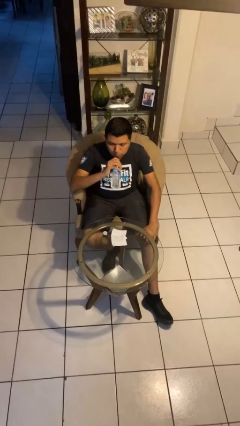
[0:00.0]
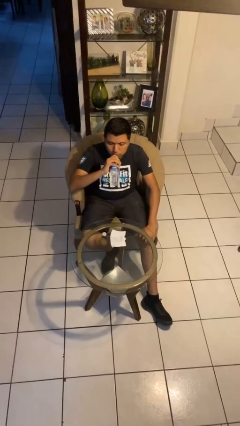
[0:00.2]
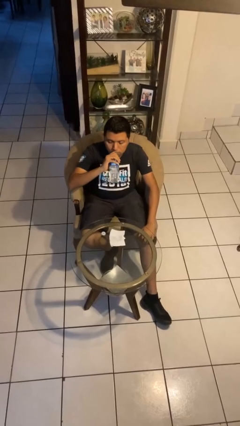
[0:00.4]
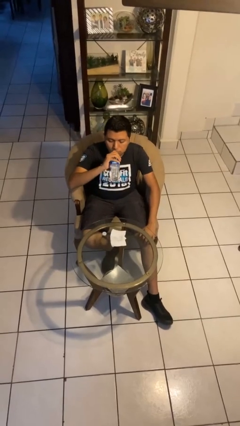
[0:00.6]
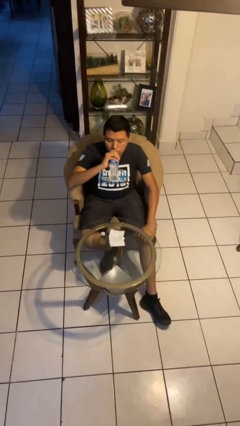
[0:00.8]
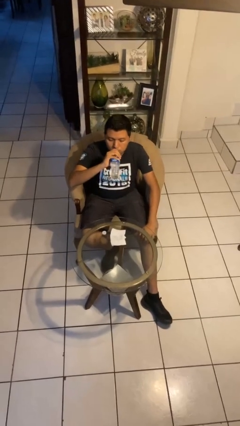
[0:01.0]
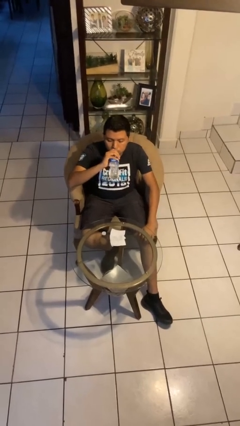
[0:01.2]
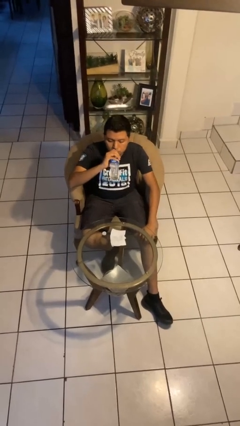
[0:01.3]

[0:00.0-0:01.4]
person drinks from bottle

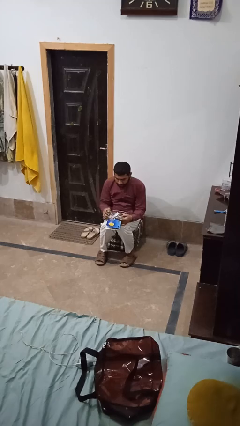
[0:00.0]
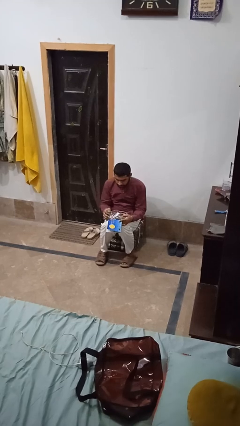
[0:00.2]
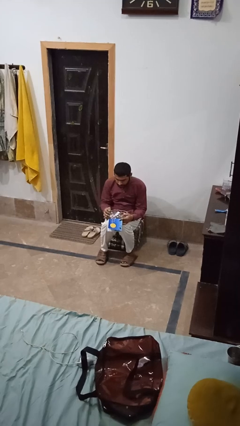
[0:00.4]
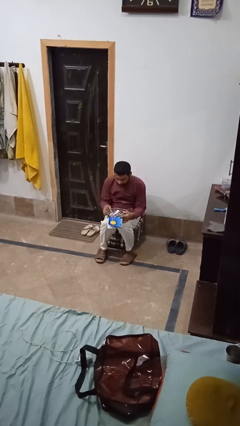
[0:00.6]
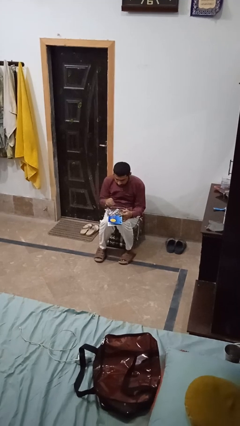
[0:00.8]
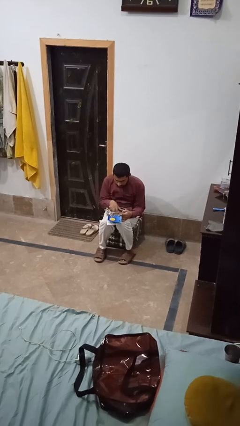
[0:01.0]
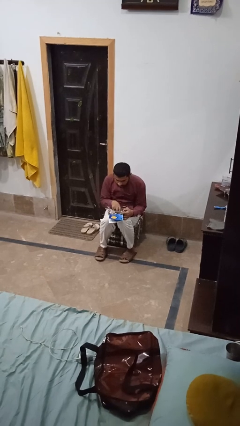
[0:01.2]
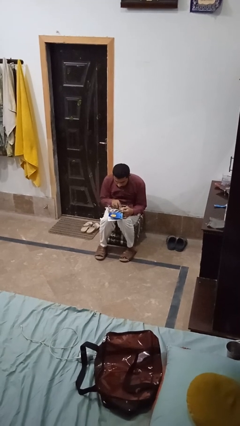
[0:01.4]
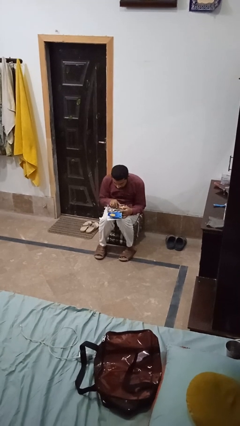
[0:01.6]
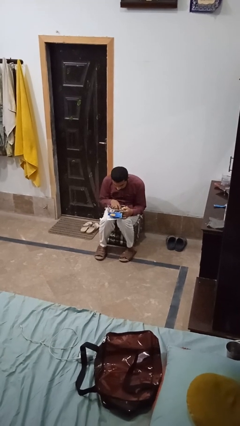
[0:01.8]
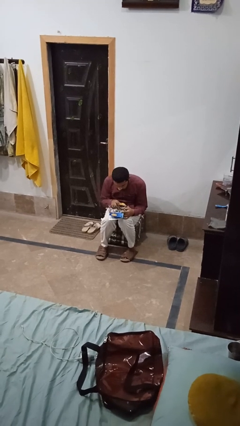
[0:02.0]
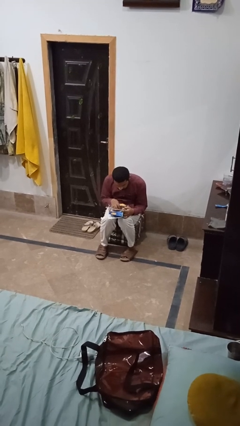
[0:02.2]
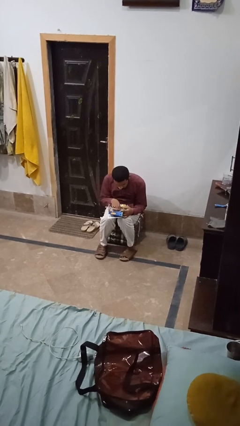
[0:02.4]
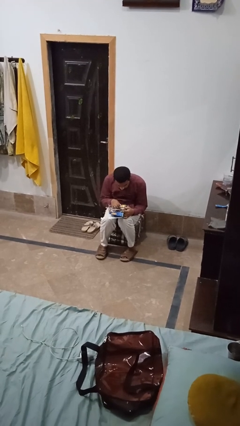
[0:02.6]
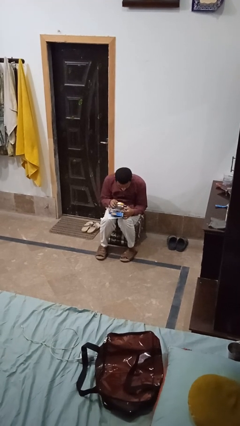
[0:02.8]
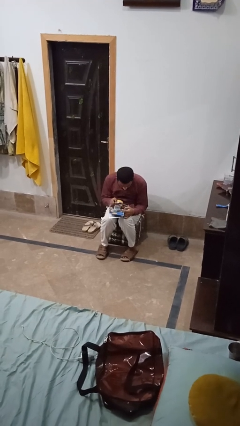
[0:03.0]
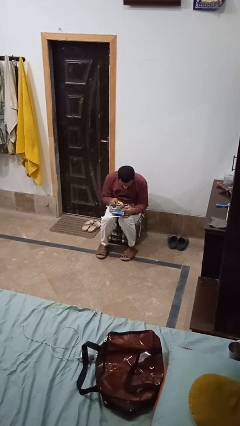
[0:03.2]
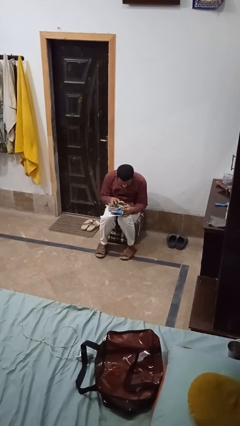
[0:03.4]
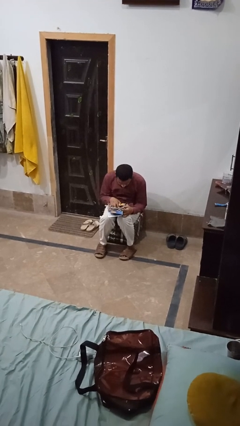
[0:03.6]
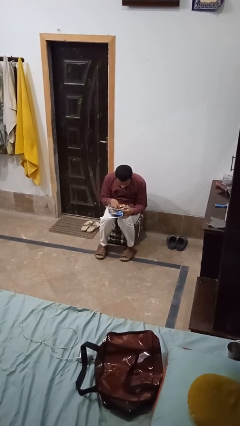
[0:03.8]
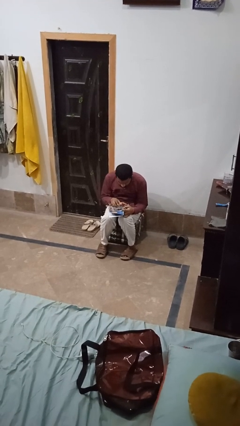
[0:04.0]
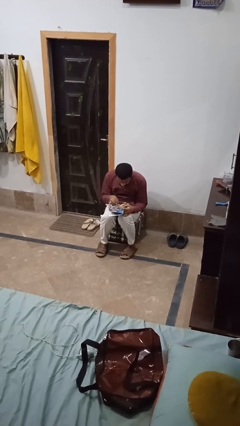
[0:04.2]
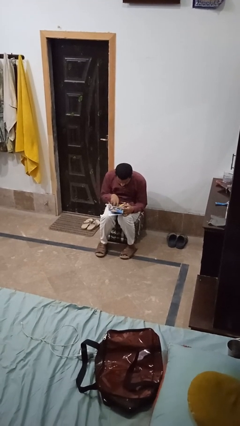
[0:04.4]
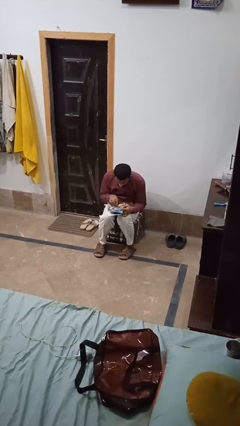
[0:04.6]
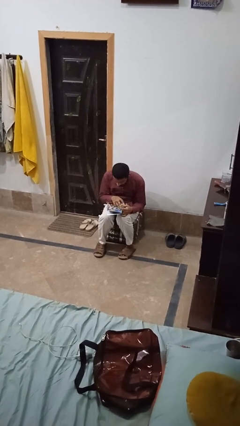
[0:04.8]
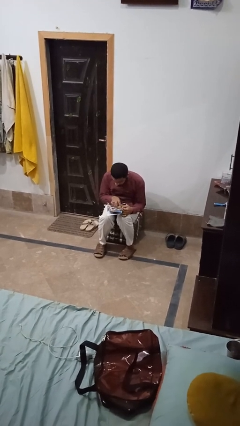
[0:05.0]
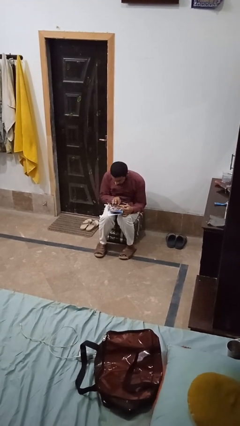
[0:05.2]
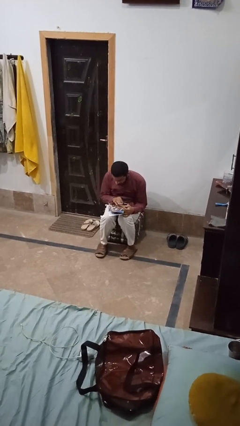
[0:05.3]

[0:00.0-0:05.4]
person searches jewelry box

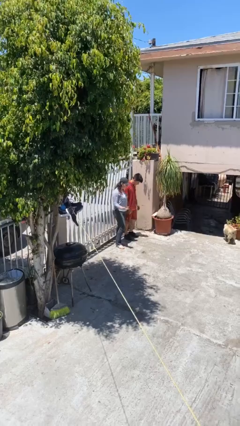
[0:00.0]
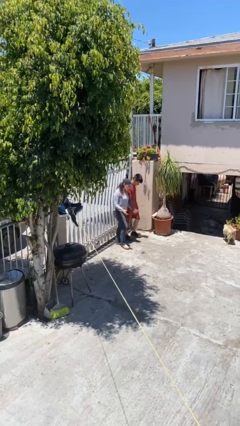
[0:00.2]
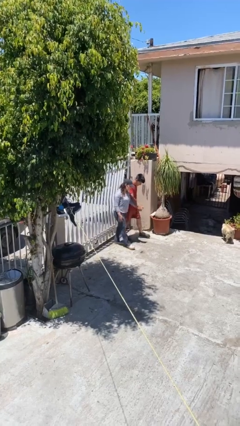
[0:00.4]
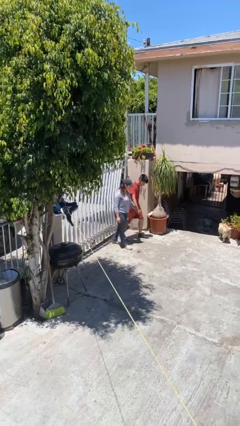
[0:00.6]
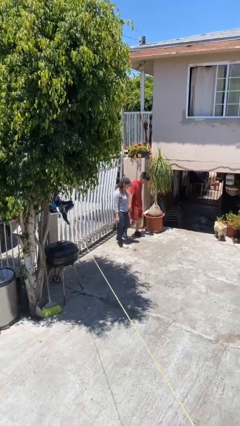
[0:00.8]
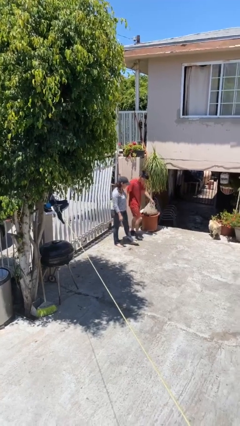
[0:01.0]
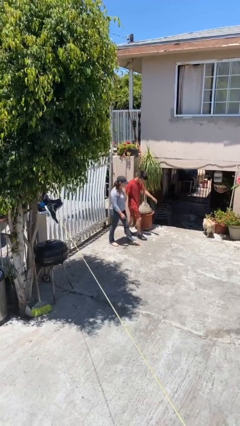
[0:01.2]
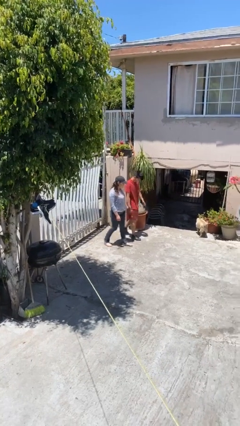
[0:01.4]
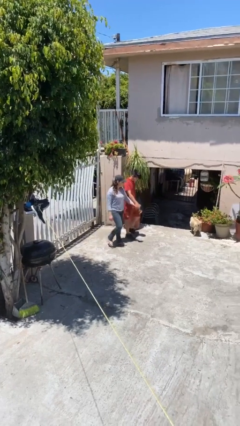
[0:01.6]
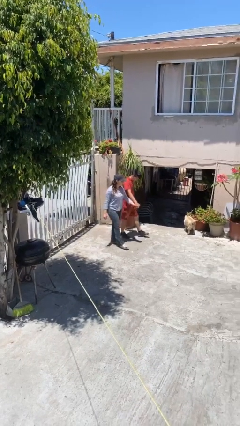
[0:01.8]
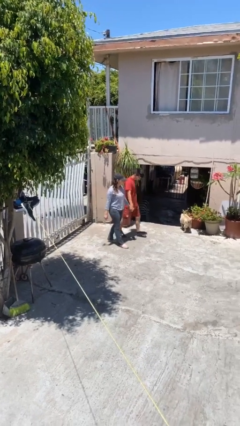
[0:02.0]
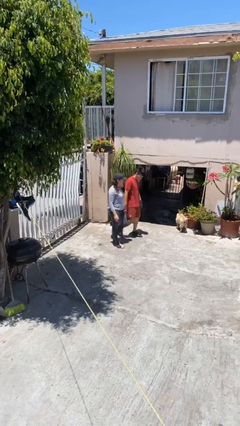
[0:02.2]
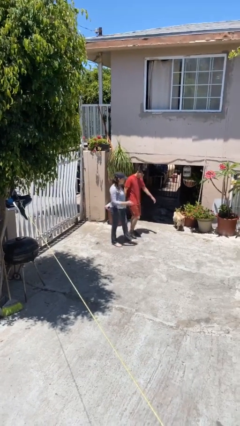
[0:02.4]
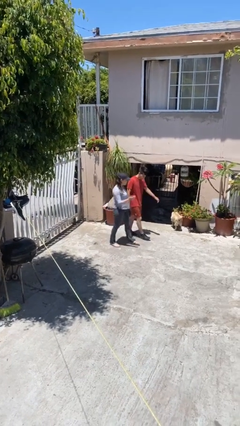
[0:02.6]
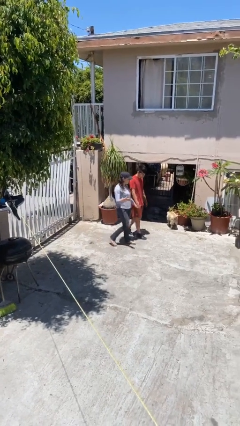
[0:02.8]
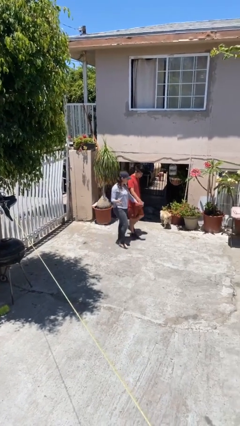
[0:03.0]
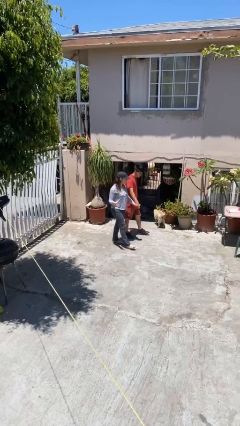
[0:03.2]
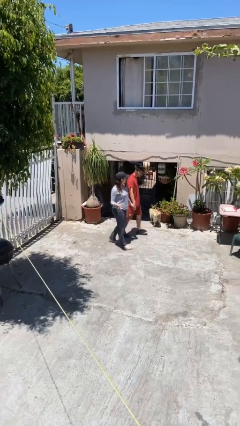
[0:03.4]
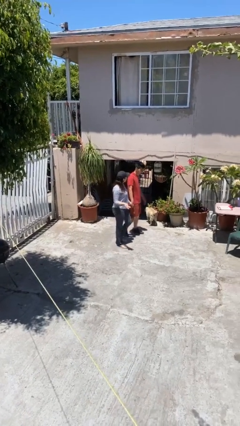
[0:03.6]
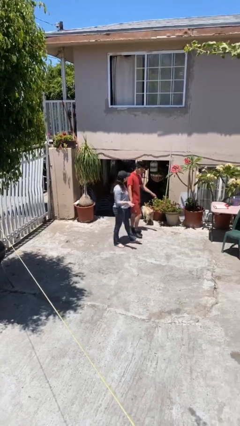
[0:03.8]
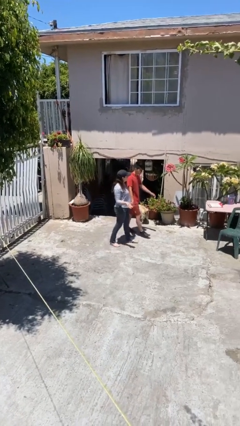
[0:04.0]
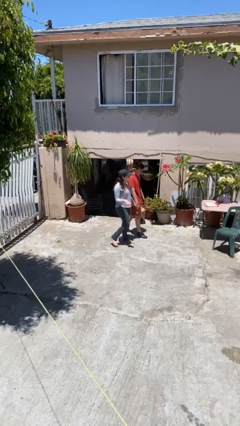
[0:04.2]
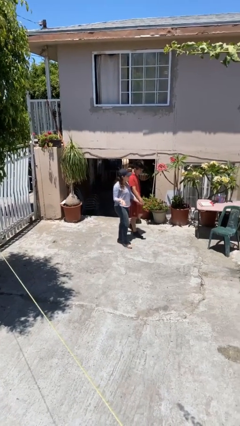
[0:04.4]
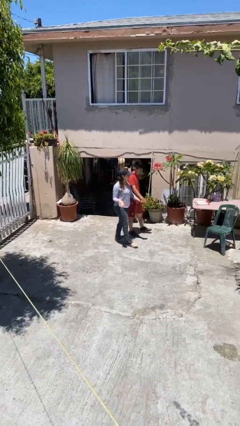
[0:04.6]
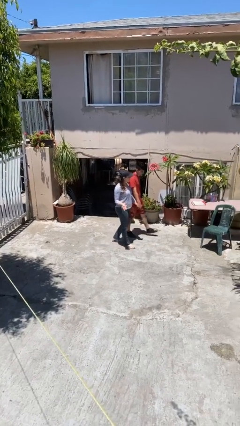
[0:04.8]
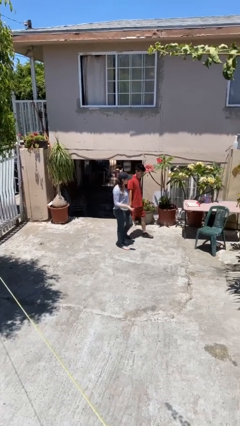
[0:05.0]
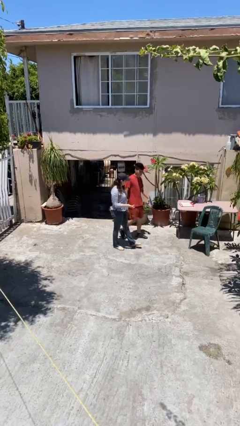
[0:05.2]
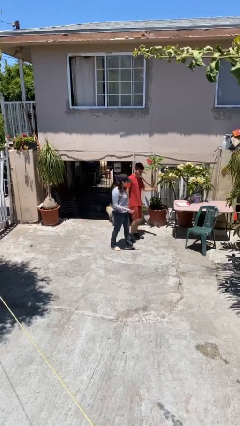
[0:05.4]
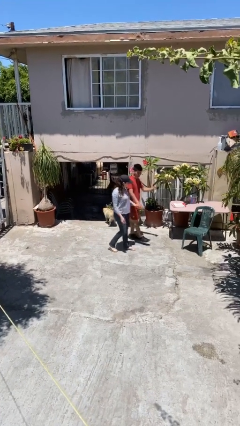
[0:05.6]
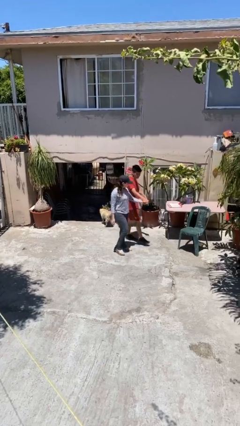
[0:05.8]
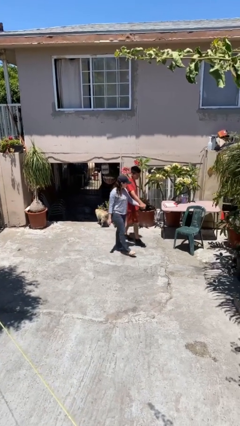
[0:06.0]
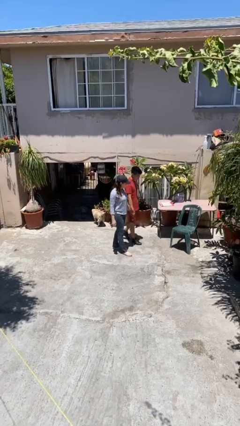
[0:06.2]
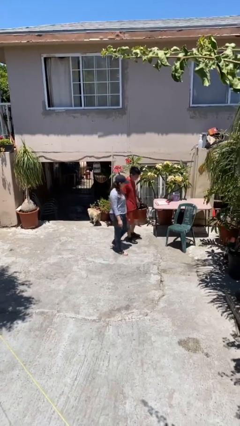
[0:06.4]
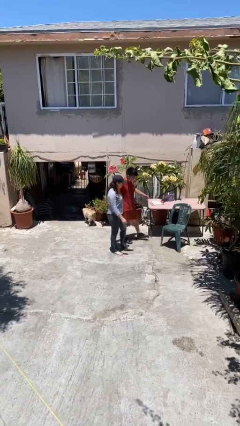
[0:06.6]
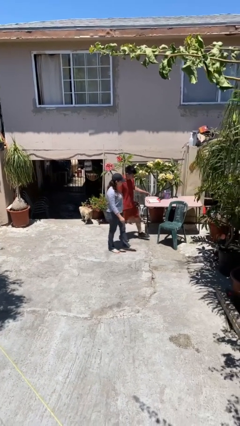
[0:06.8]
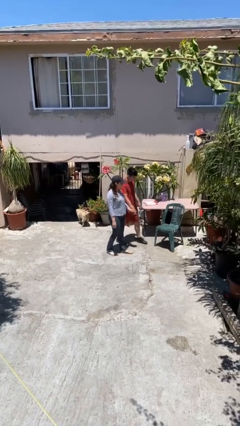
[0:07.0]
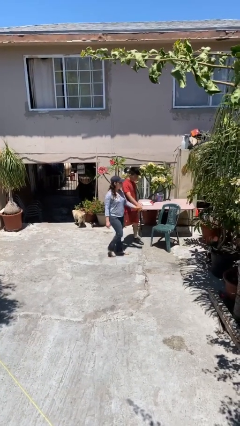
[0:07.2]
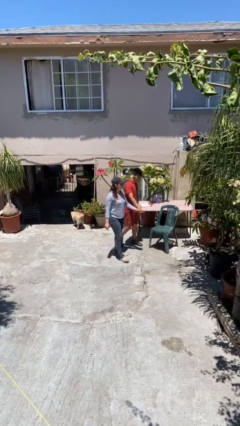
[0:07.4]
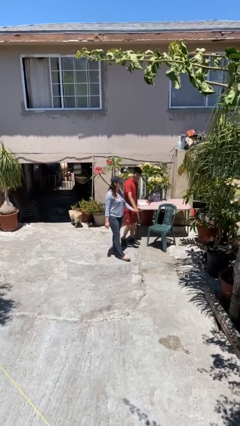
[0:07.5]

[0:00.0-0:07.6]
person holds hand

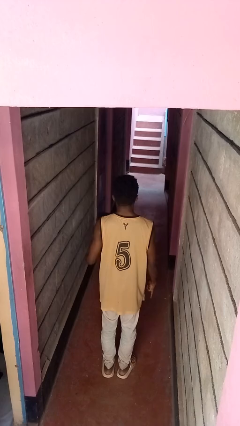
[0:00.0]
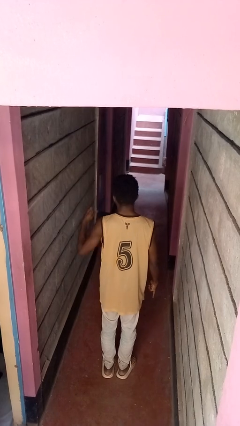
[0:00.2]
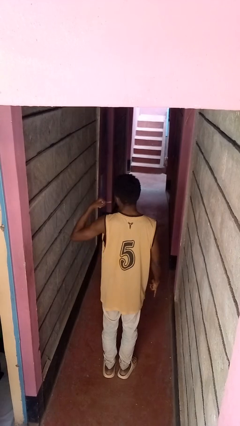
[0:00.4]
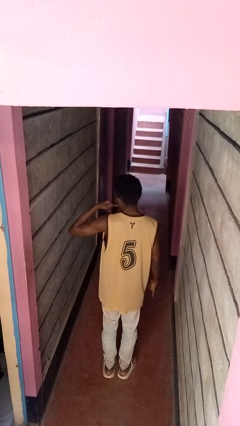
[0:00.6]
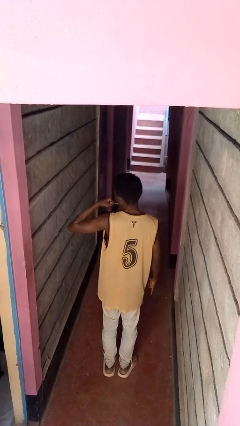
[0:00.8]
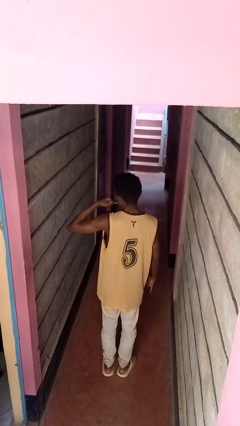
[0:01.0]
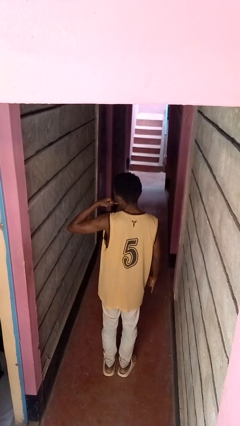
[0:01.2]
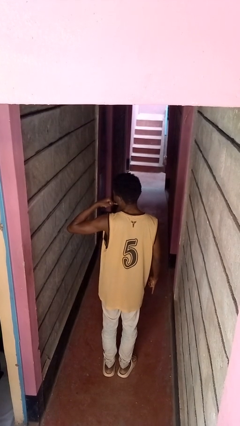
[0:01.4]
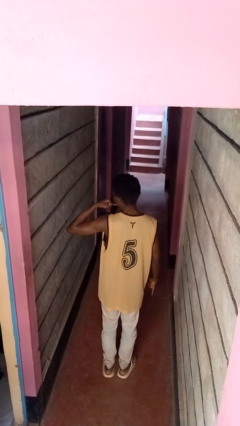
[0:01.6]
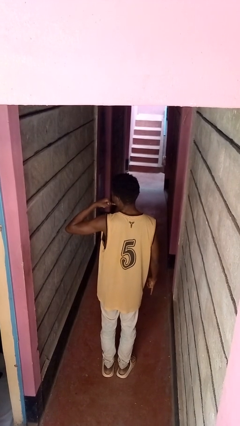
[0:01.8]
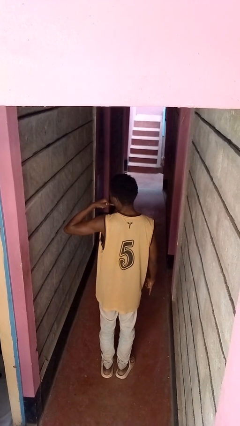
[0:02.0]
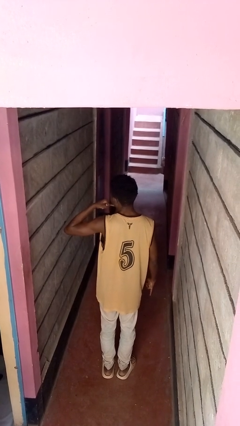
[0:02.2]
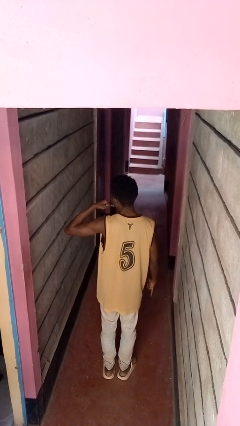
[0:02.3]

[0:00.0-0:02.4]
person gestures call me

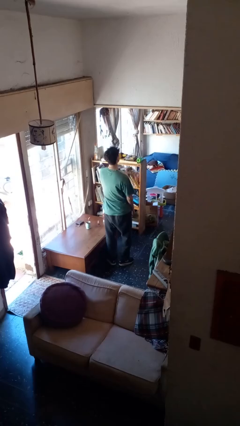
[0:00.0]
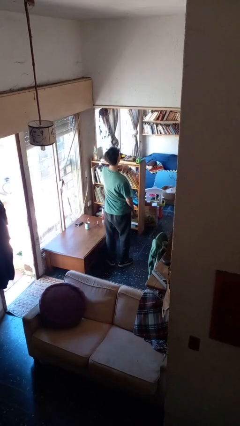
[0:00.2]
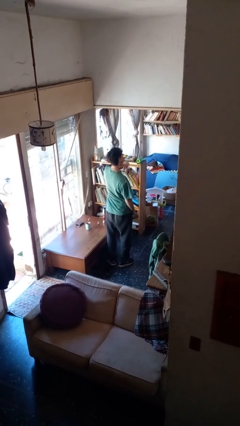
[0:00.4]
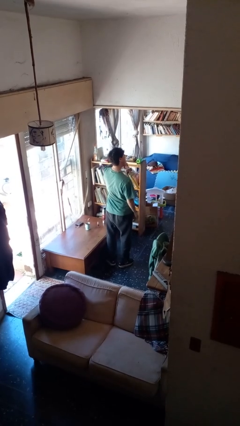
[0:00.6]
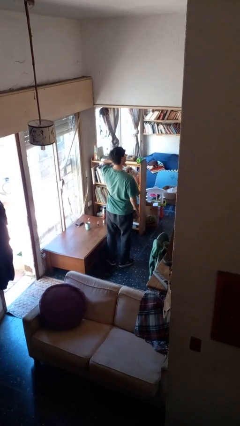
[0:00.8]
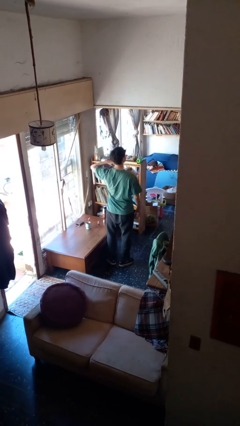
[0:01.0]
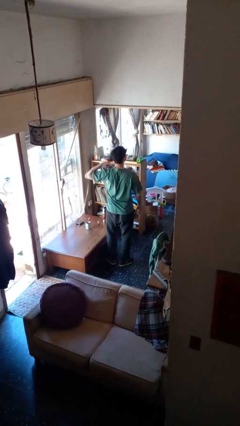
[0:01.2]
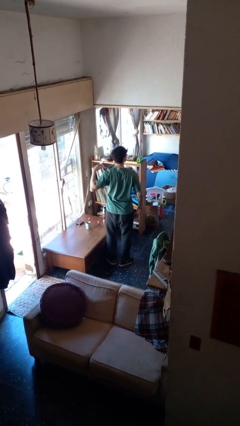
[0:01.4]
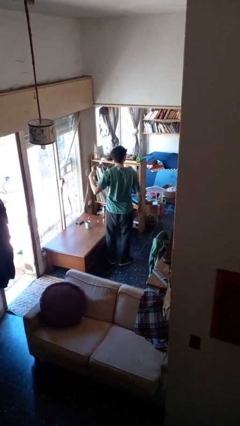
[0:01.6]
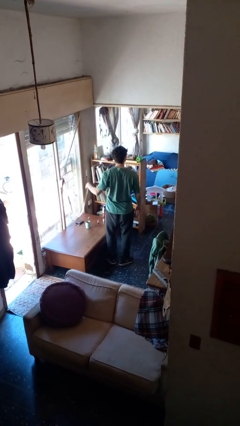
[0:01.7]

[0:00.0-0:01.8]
person gestures cut
